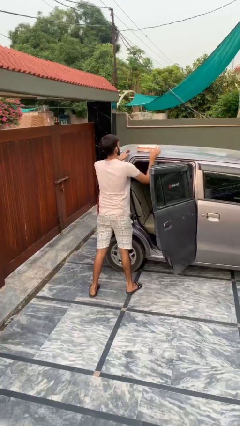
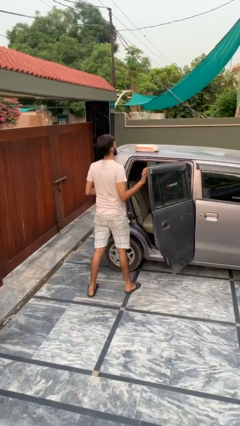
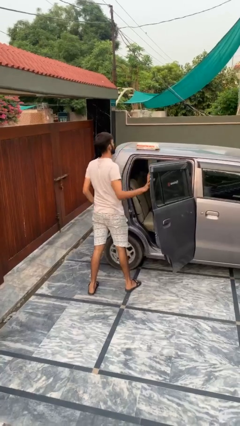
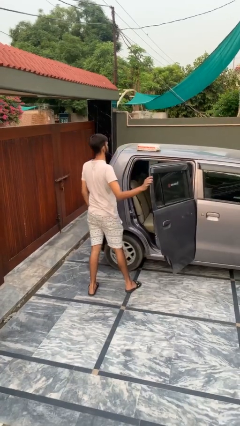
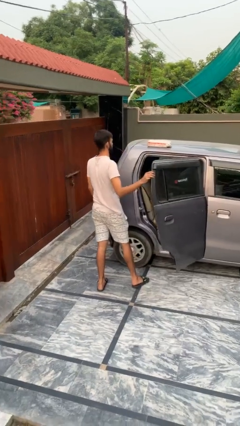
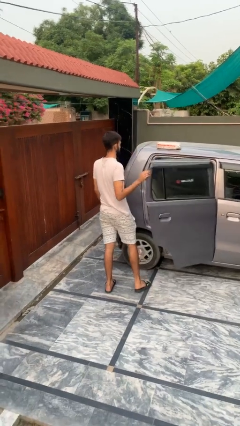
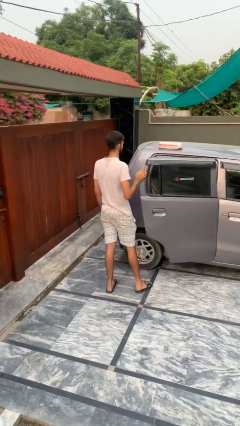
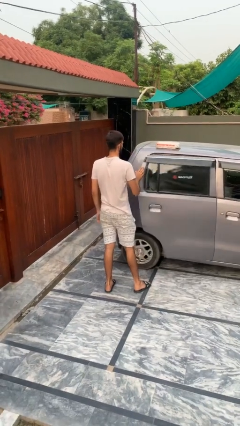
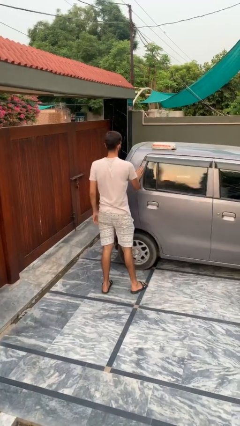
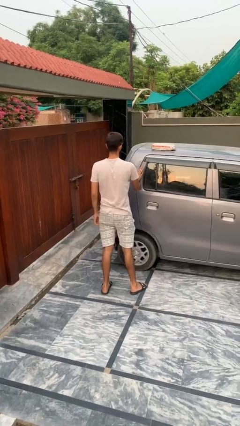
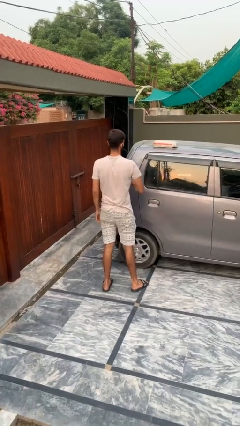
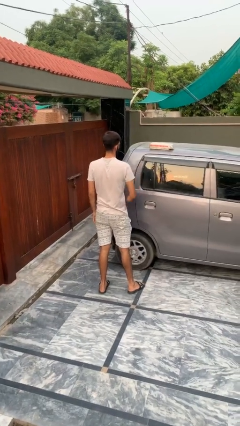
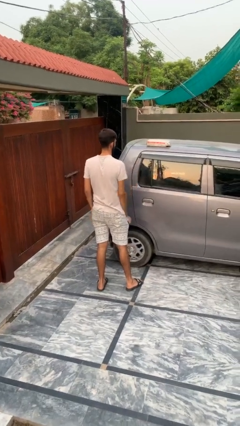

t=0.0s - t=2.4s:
person closes car door

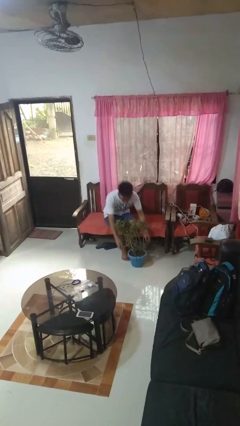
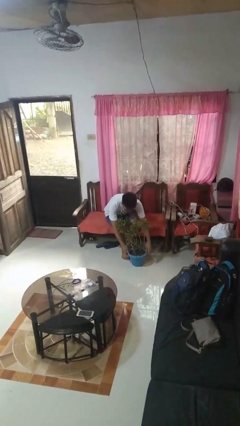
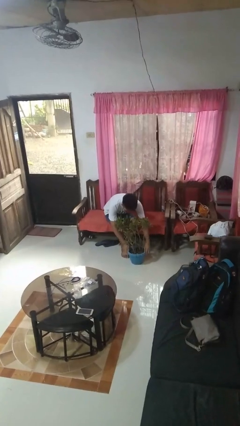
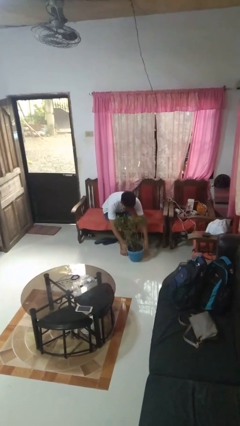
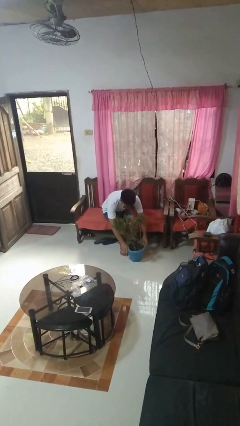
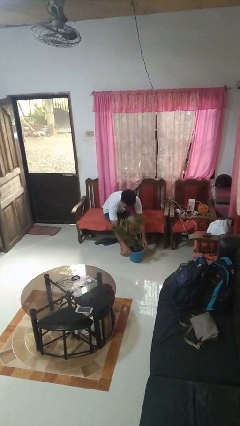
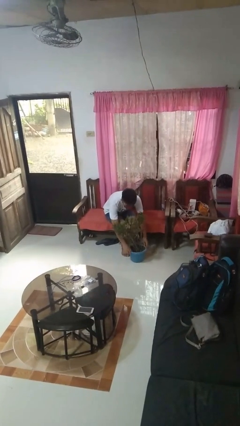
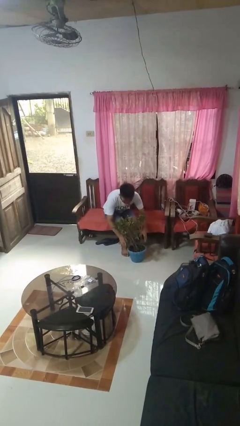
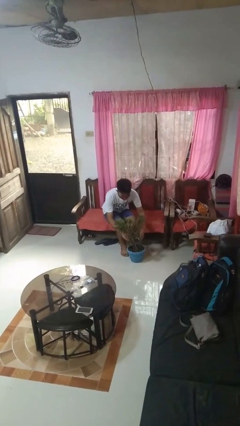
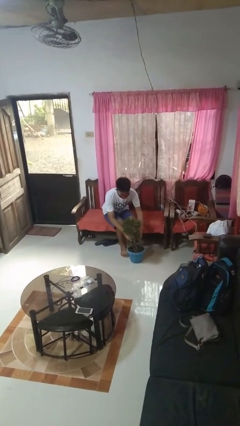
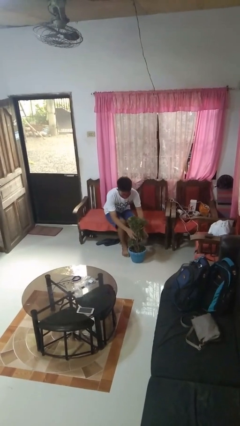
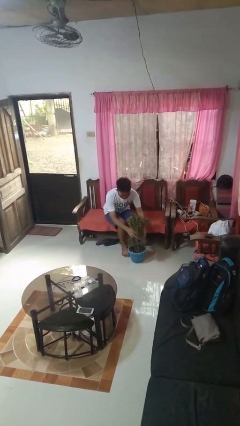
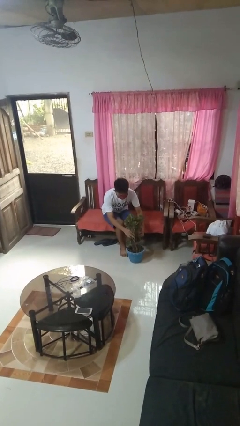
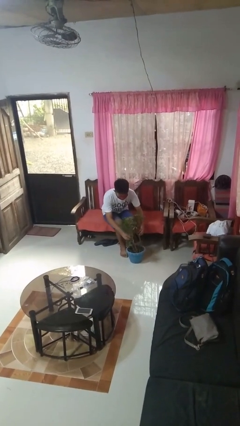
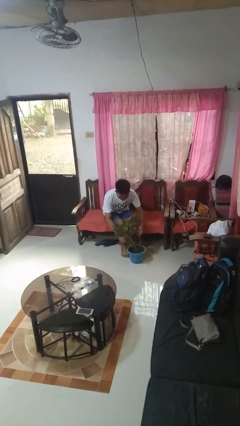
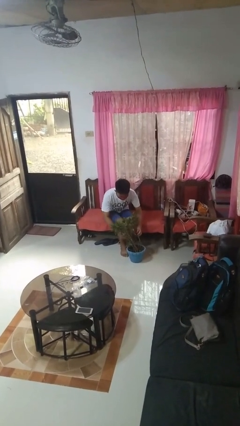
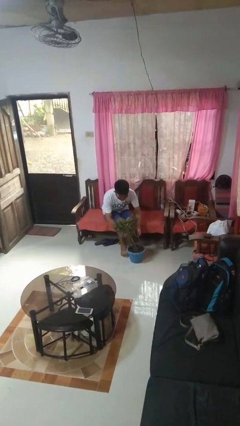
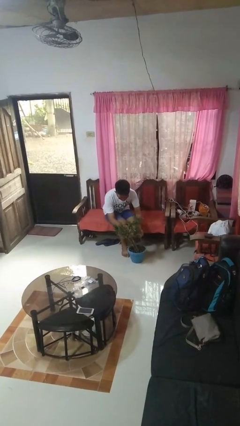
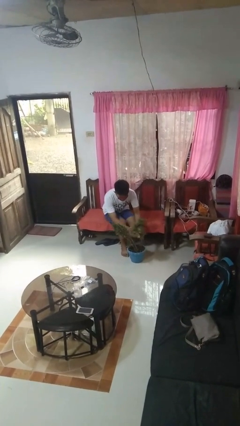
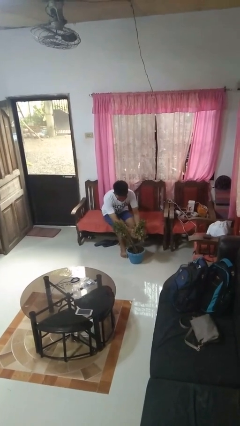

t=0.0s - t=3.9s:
person arranges flowers in vase

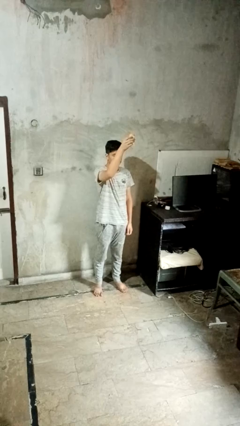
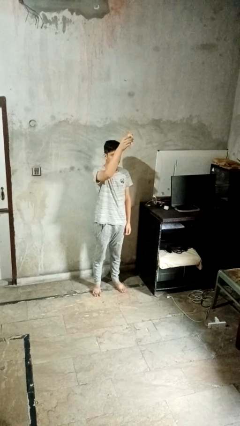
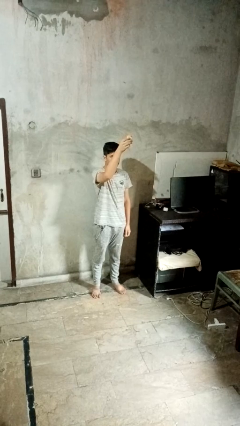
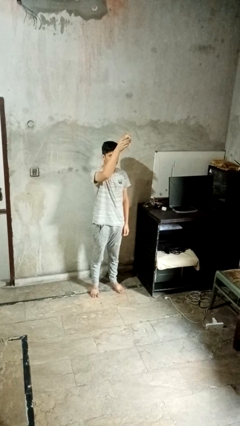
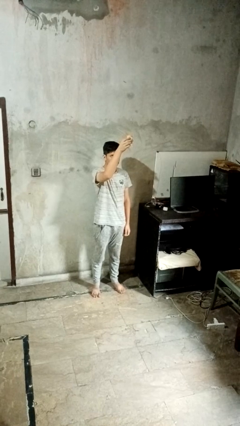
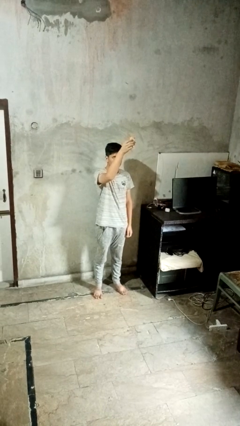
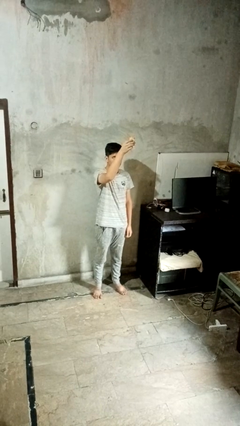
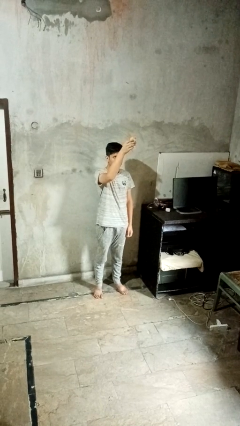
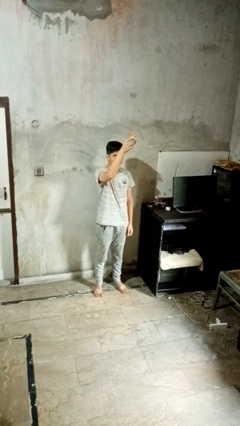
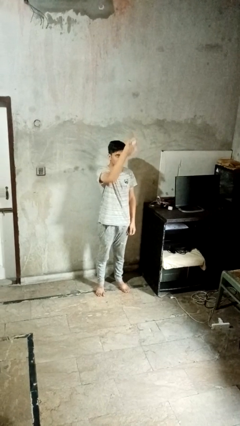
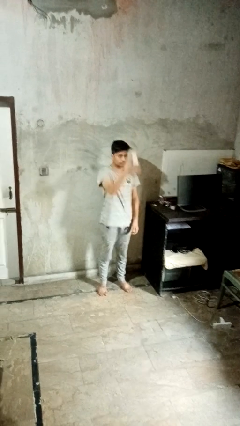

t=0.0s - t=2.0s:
person drops object

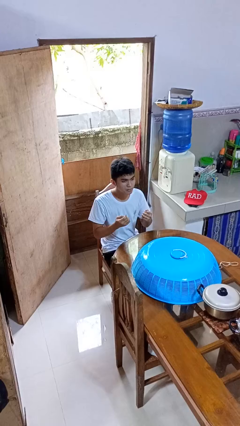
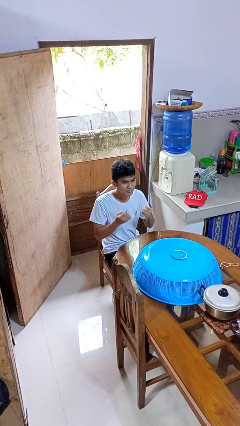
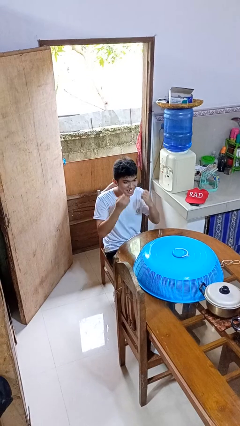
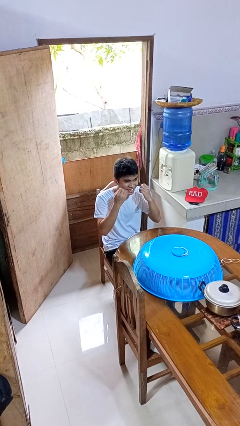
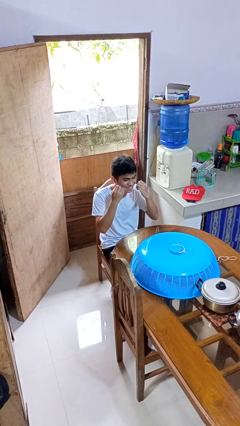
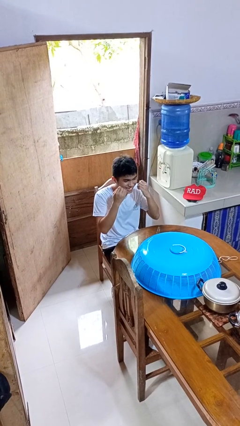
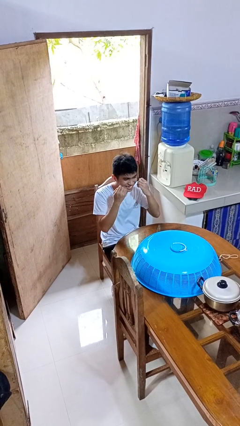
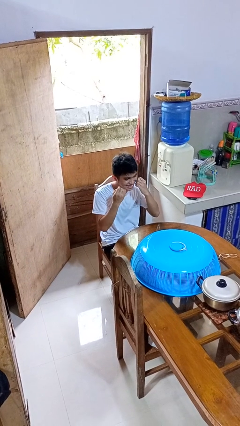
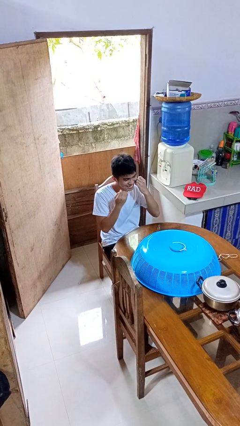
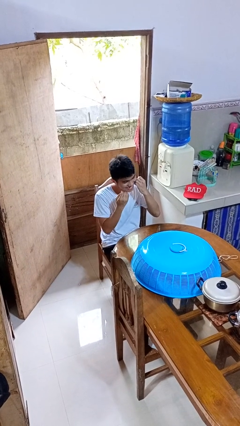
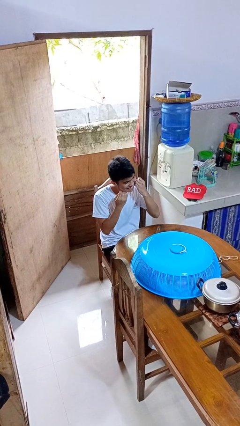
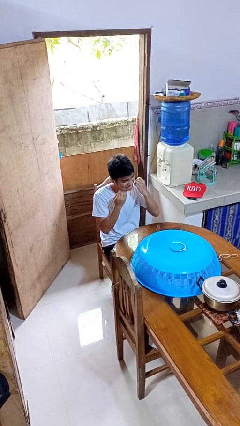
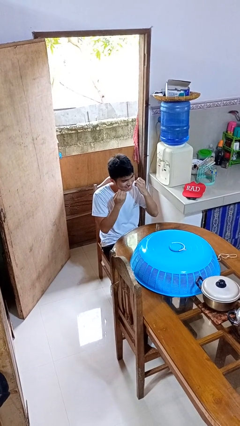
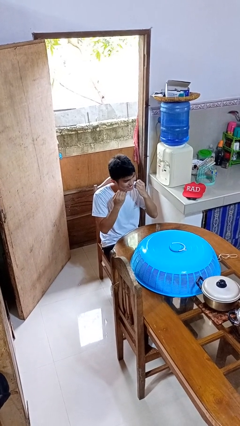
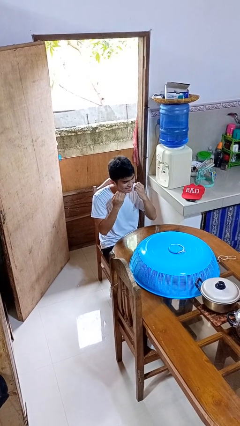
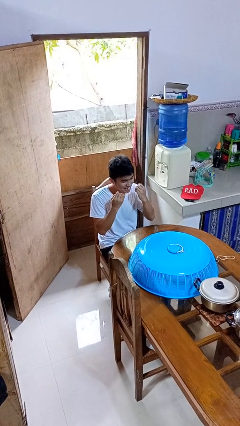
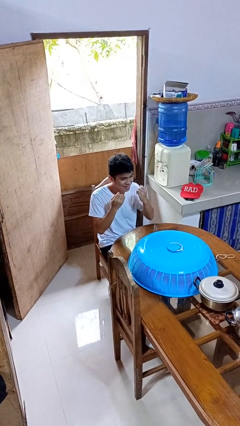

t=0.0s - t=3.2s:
person flosses

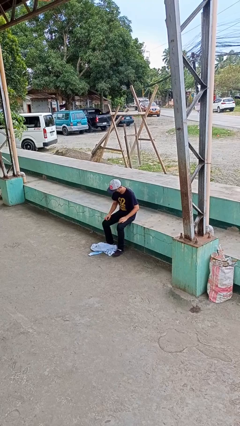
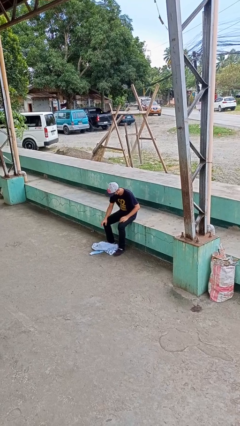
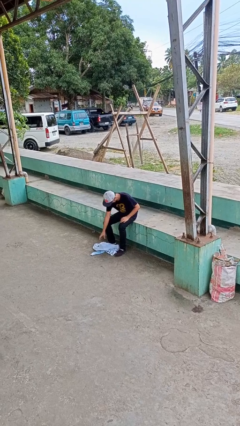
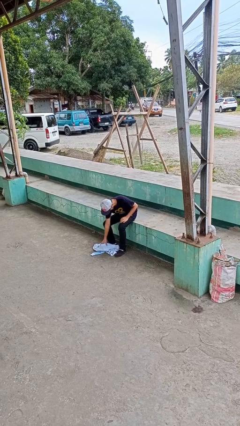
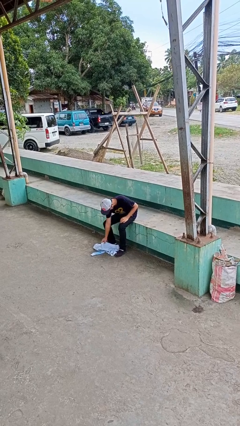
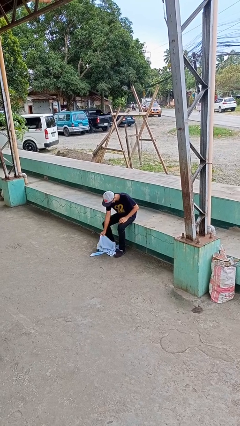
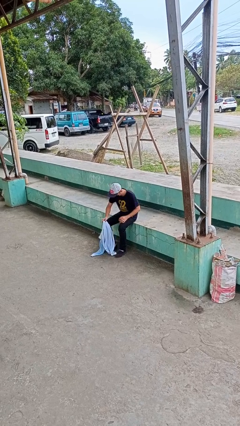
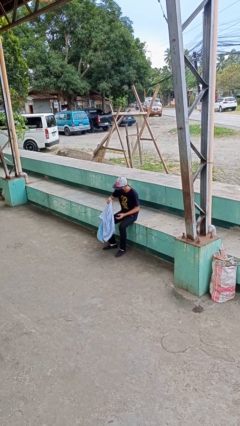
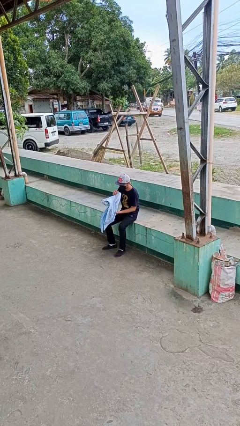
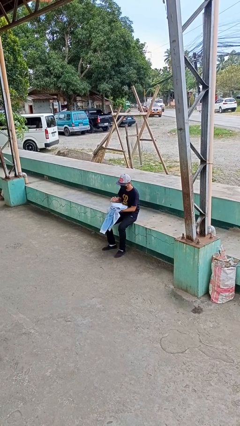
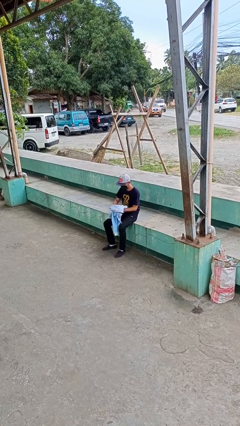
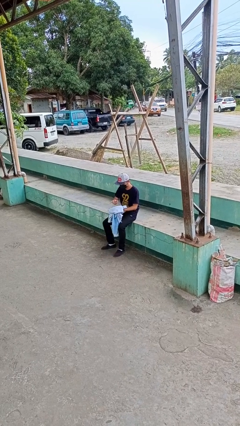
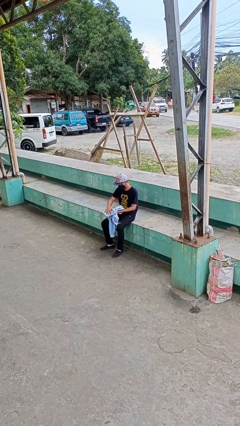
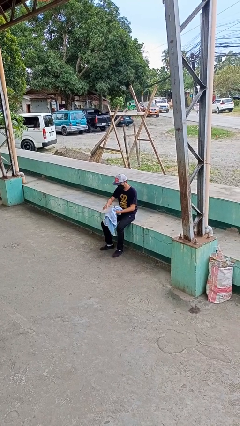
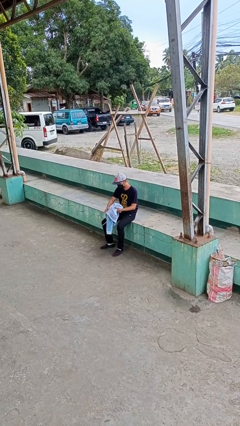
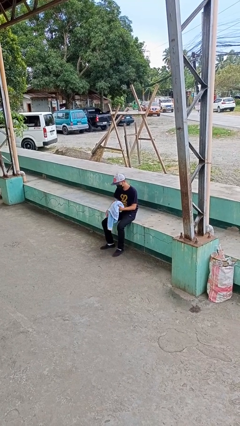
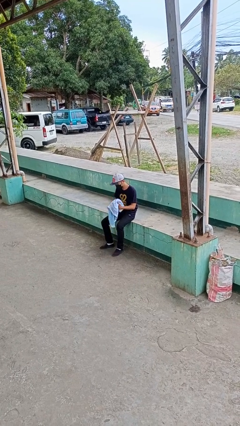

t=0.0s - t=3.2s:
person picks up object from floor

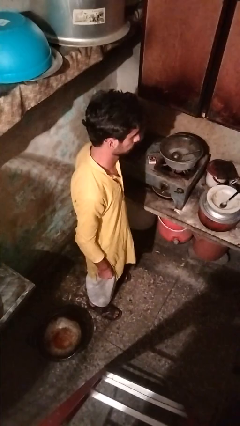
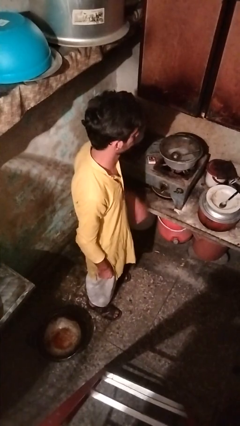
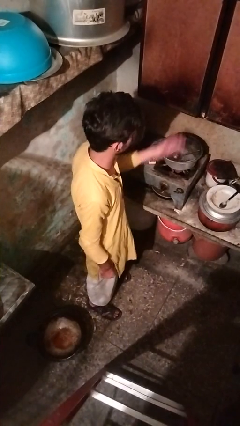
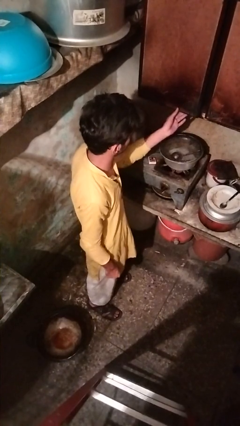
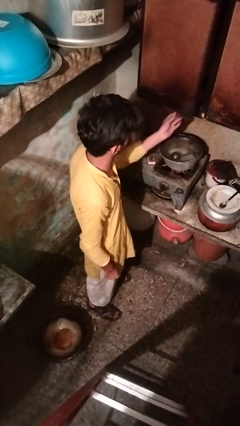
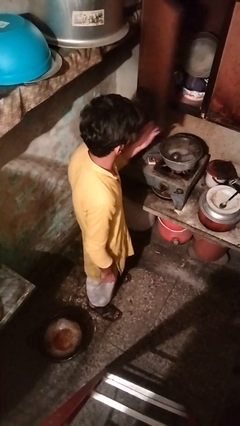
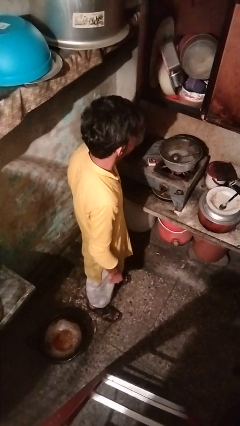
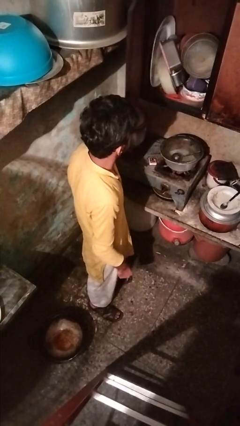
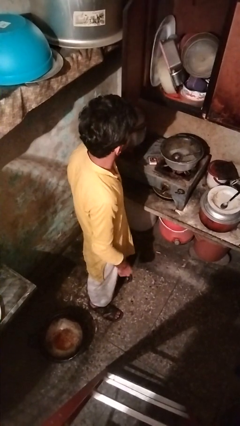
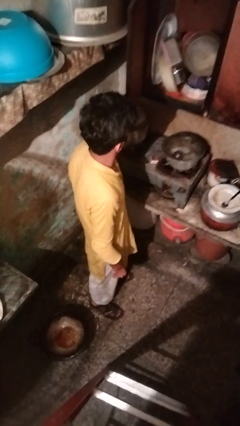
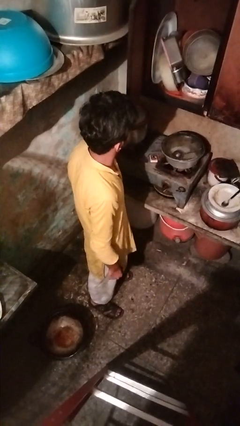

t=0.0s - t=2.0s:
person opens cabinet

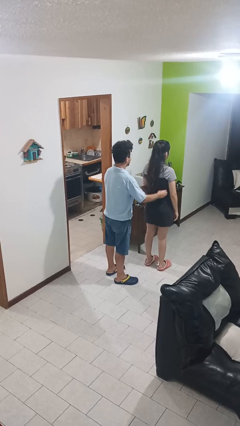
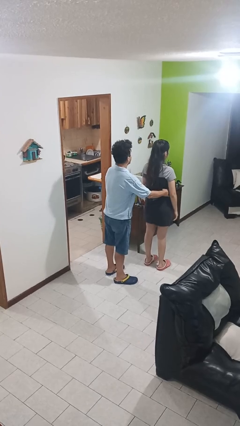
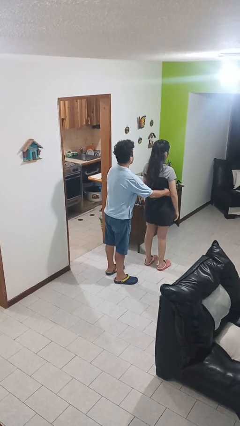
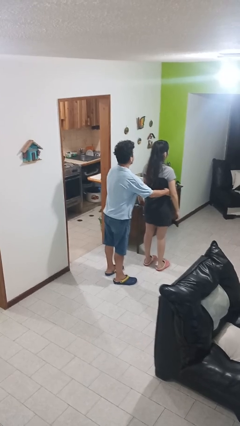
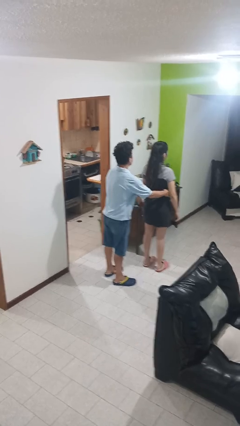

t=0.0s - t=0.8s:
person tickles person
